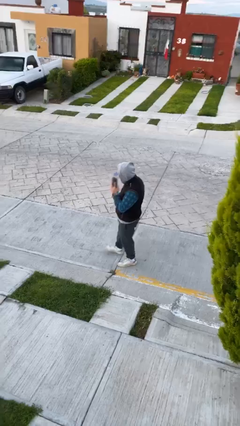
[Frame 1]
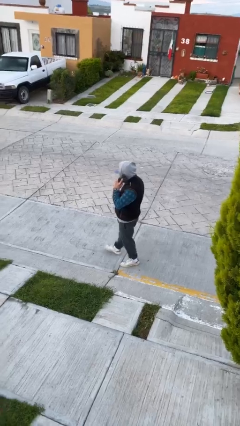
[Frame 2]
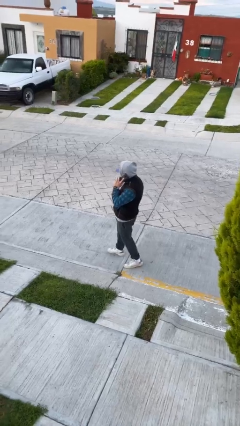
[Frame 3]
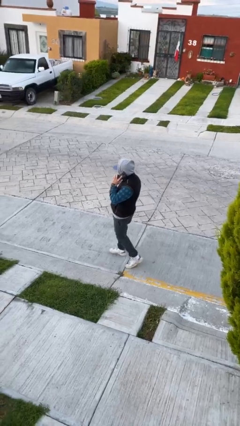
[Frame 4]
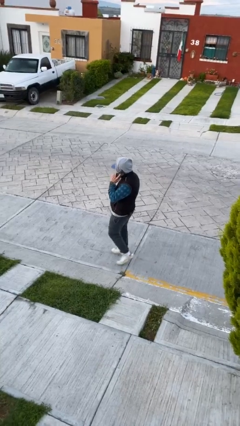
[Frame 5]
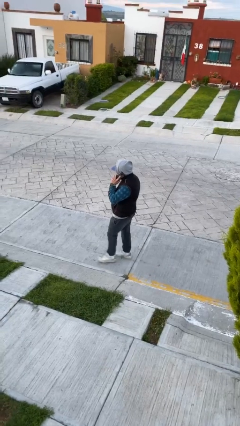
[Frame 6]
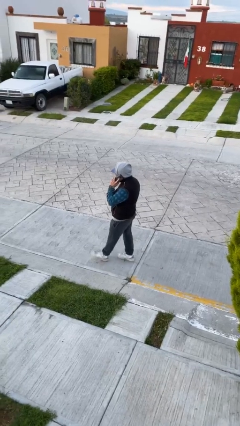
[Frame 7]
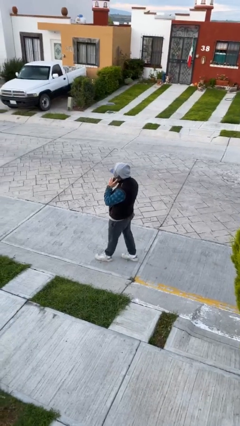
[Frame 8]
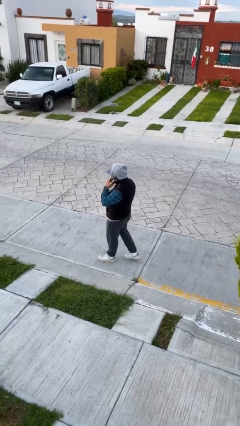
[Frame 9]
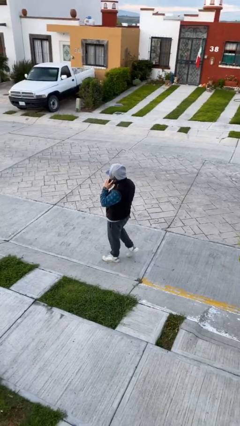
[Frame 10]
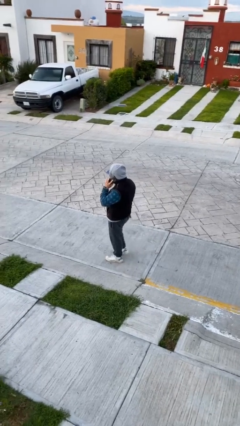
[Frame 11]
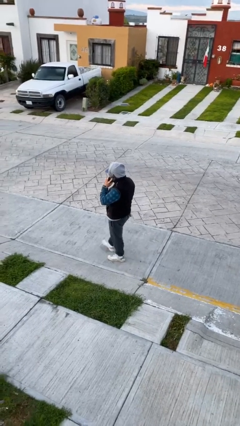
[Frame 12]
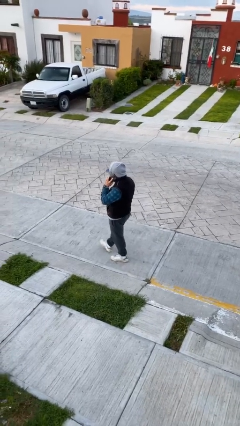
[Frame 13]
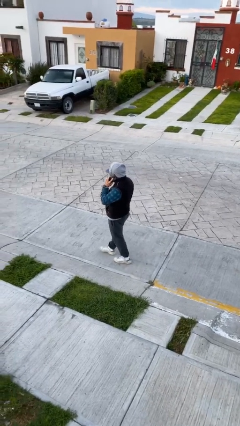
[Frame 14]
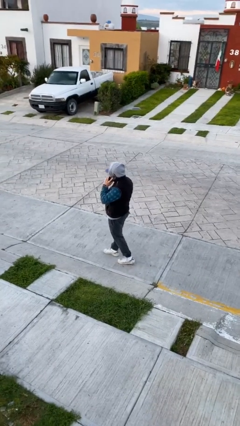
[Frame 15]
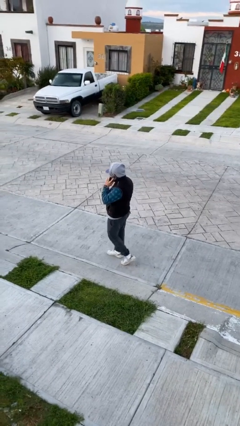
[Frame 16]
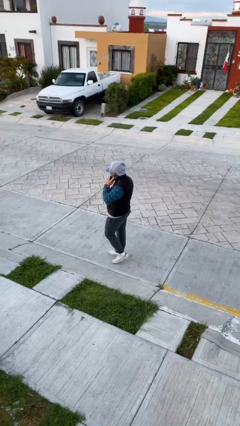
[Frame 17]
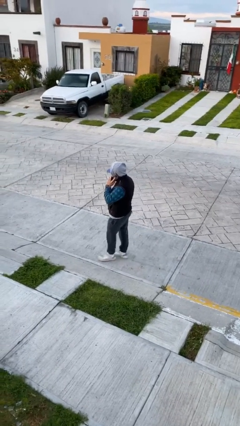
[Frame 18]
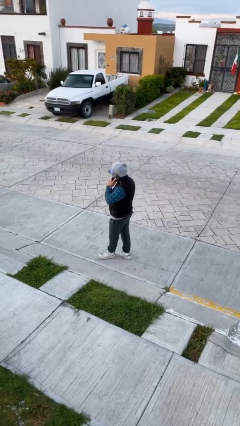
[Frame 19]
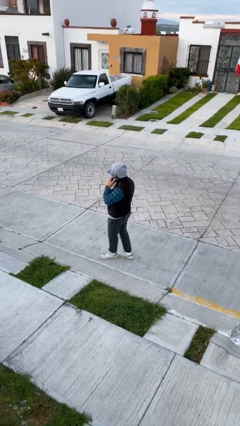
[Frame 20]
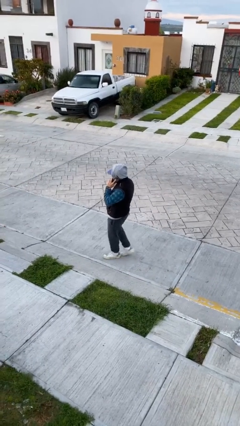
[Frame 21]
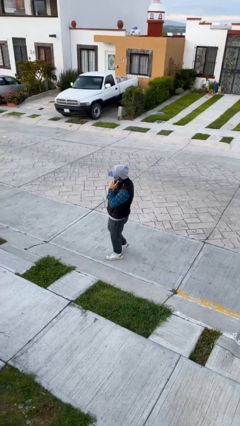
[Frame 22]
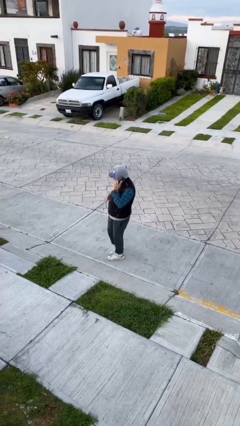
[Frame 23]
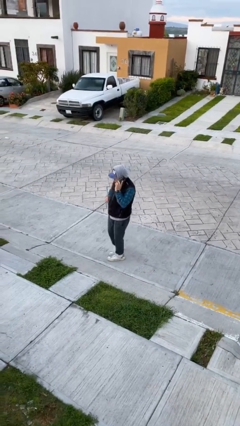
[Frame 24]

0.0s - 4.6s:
person talks on phone

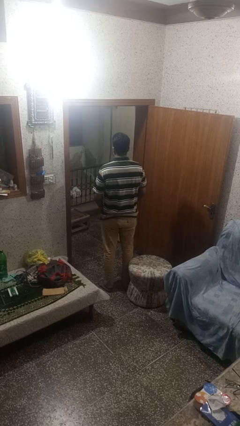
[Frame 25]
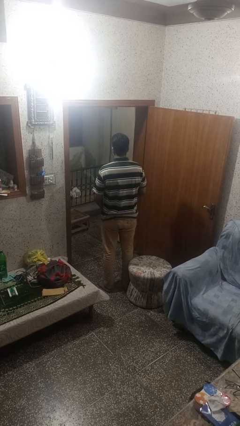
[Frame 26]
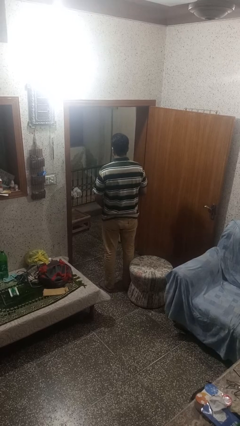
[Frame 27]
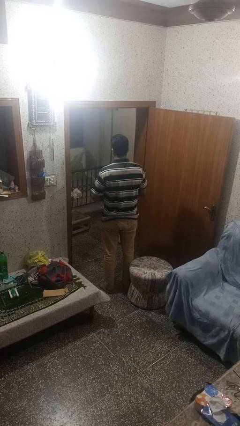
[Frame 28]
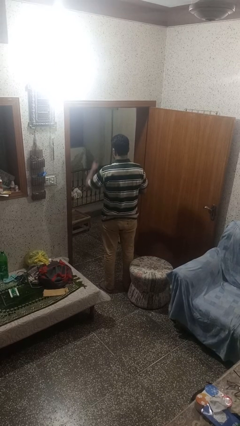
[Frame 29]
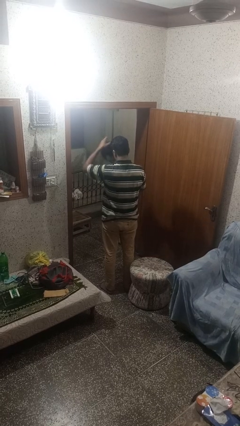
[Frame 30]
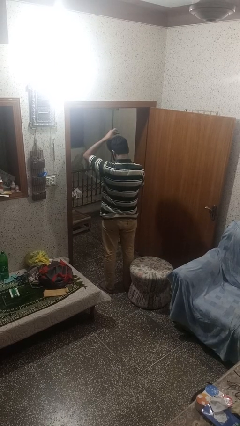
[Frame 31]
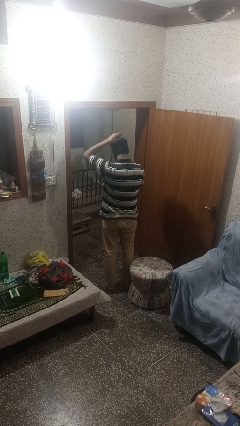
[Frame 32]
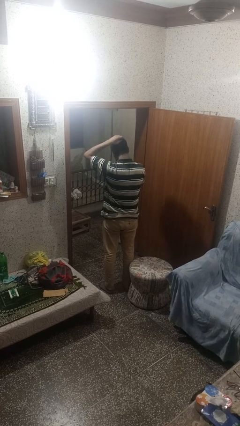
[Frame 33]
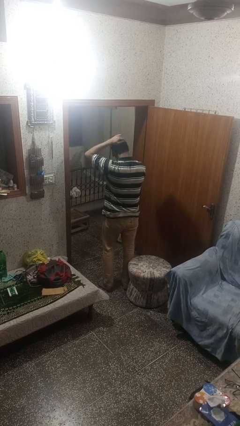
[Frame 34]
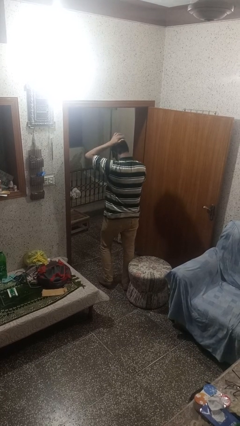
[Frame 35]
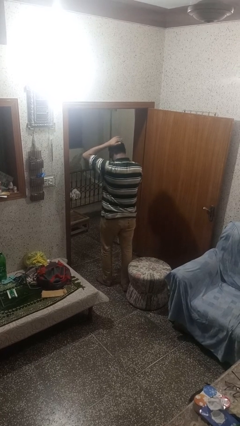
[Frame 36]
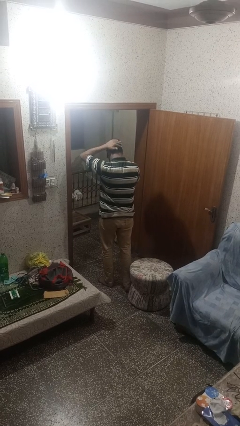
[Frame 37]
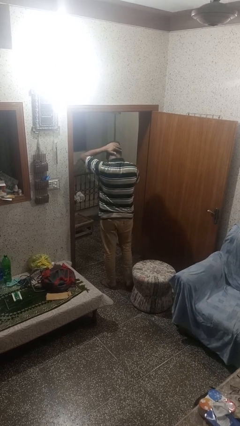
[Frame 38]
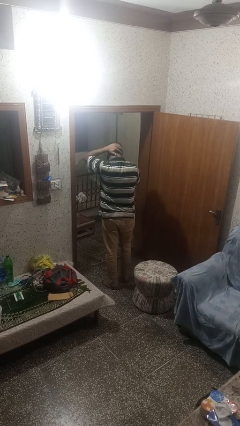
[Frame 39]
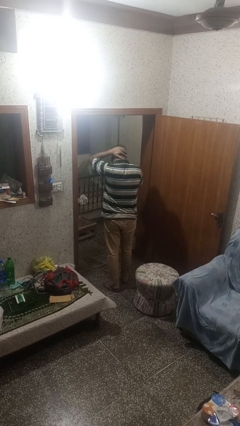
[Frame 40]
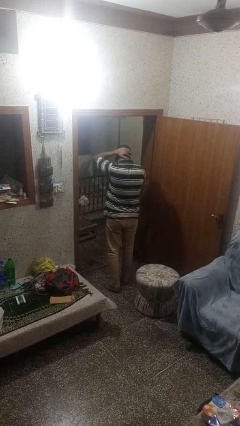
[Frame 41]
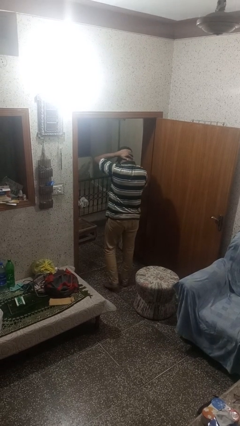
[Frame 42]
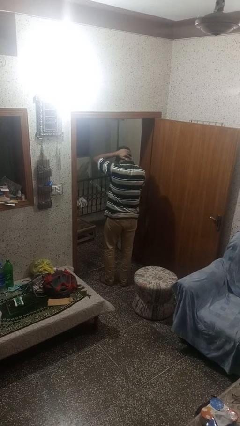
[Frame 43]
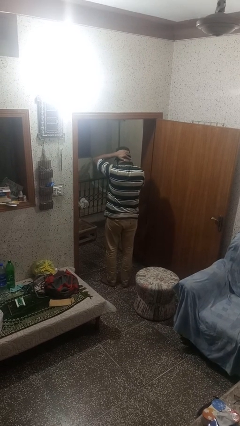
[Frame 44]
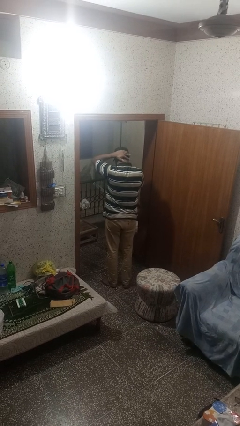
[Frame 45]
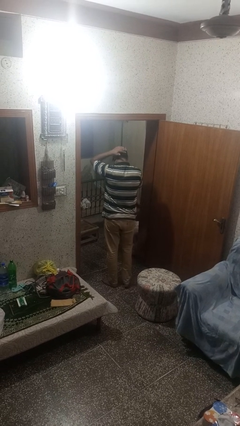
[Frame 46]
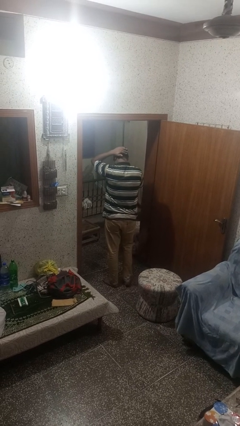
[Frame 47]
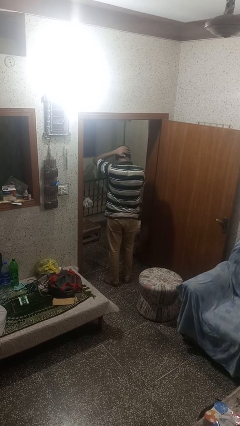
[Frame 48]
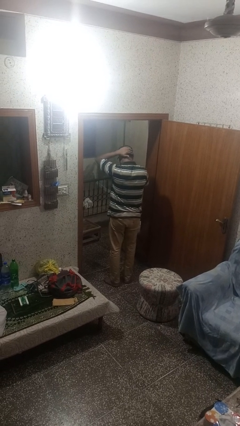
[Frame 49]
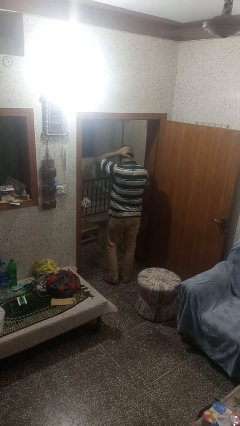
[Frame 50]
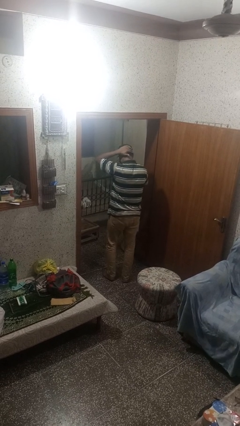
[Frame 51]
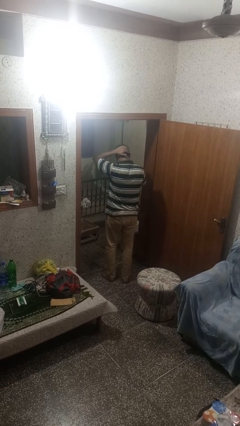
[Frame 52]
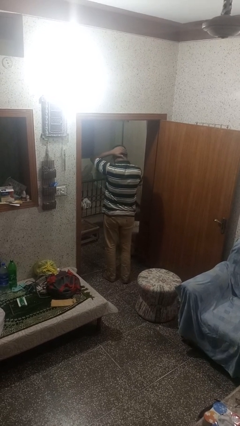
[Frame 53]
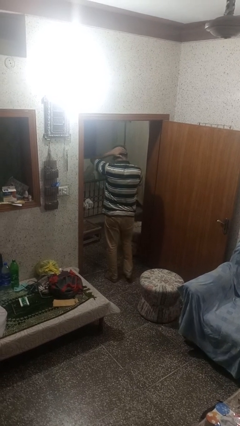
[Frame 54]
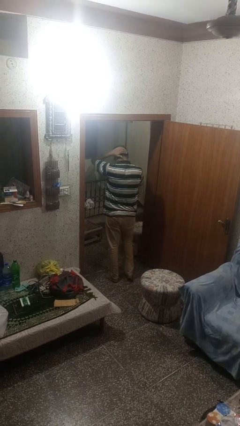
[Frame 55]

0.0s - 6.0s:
person puts on hat

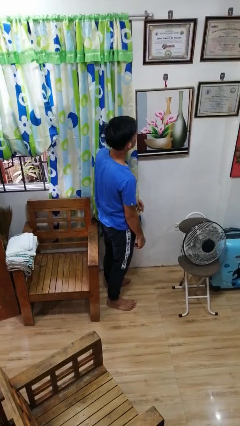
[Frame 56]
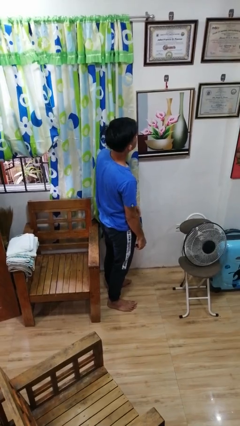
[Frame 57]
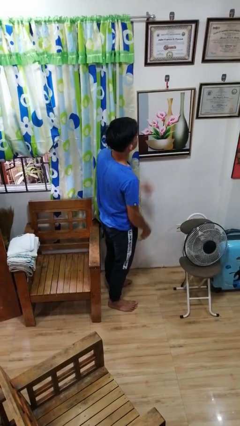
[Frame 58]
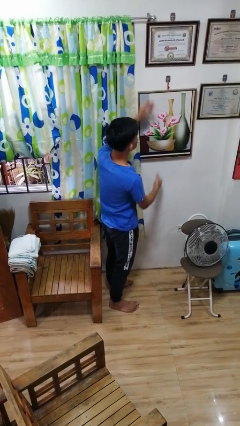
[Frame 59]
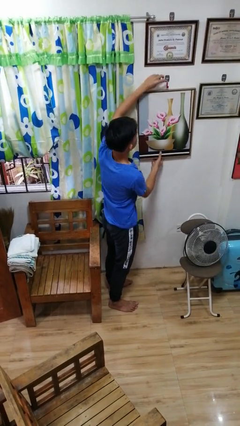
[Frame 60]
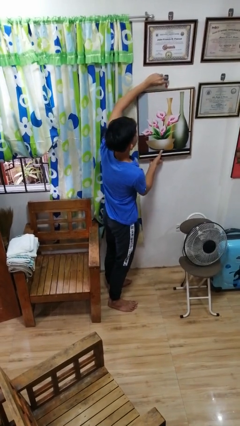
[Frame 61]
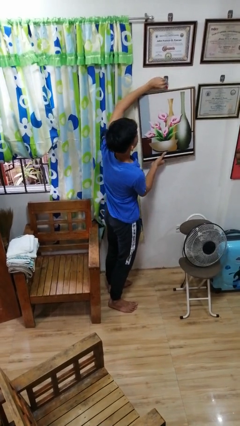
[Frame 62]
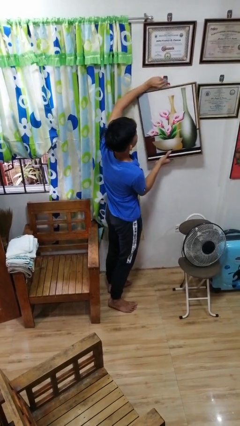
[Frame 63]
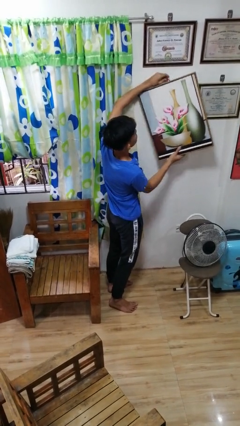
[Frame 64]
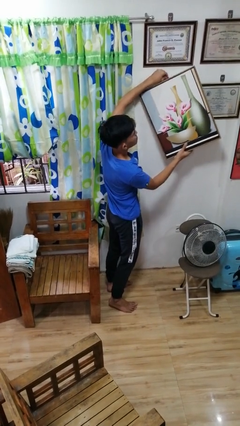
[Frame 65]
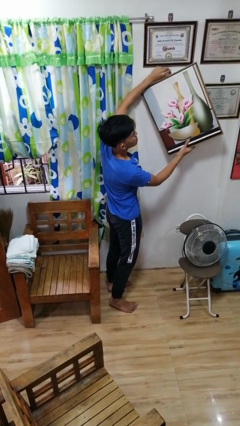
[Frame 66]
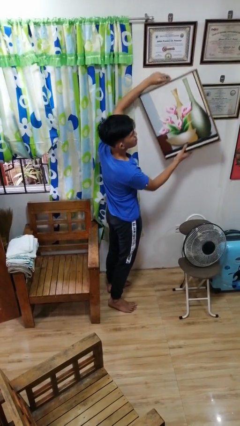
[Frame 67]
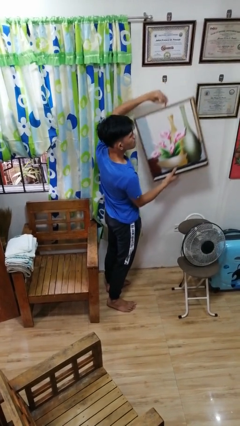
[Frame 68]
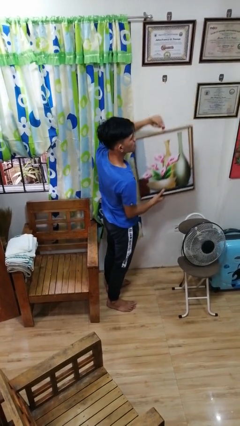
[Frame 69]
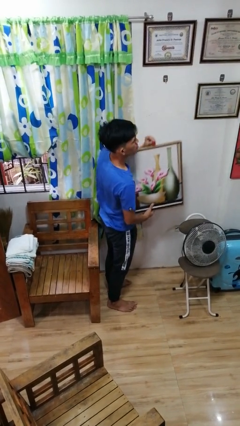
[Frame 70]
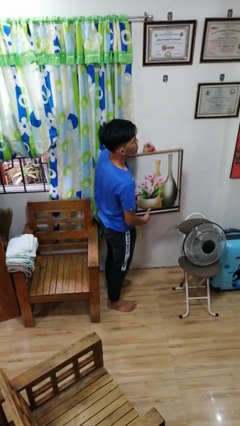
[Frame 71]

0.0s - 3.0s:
person takes down picture frame

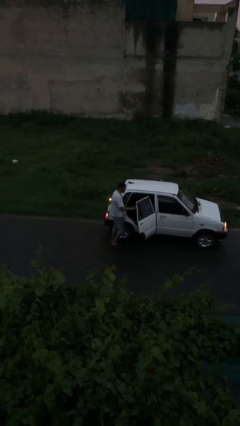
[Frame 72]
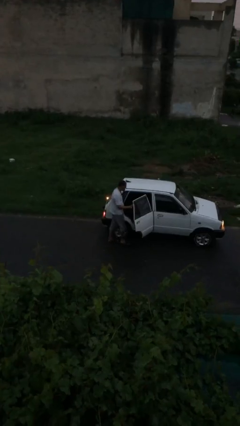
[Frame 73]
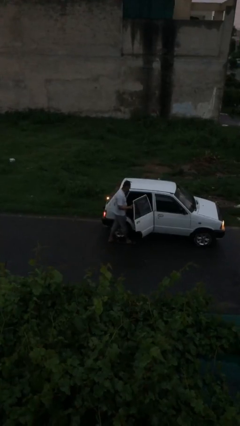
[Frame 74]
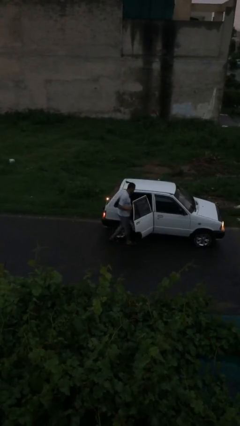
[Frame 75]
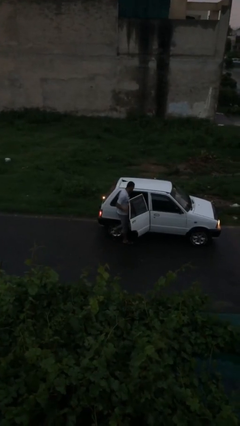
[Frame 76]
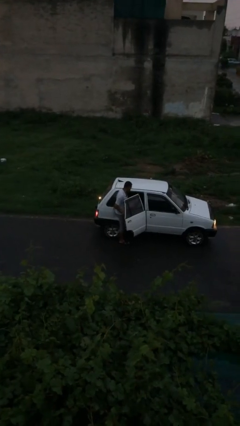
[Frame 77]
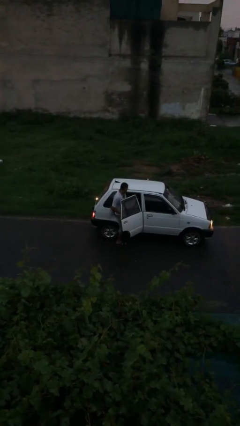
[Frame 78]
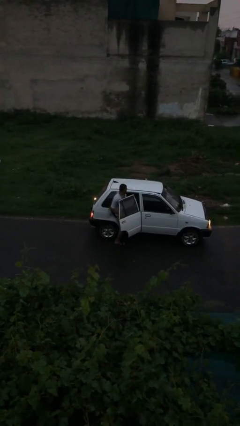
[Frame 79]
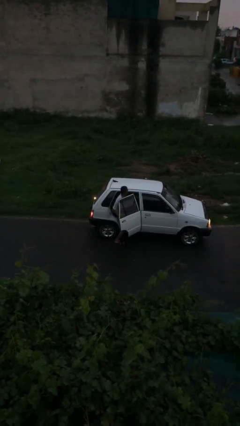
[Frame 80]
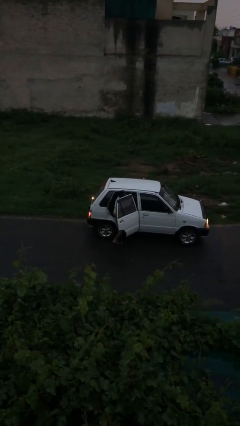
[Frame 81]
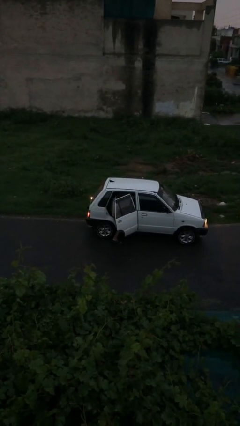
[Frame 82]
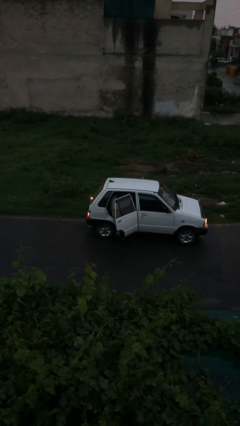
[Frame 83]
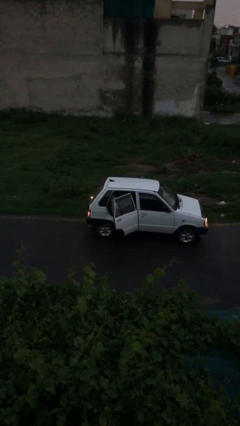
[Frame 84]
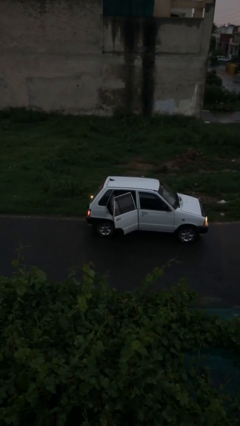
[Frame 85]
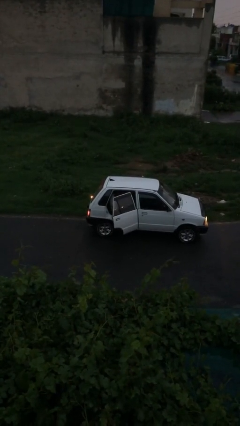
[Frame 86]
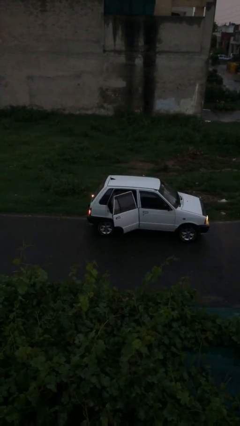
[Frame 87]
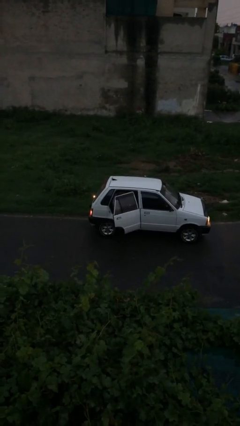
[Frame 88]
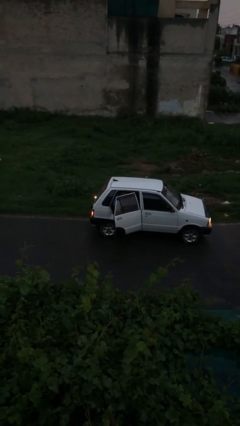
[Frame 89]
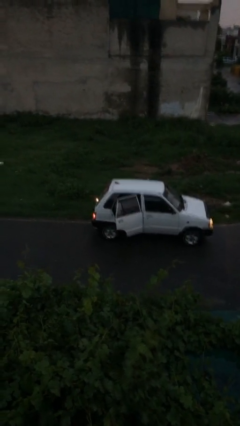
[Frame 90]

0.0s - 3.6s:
person enters car

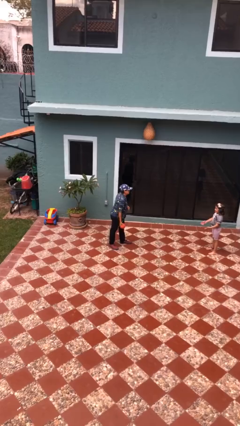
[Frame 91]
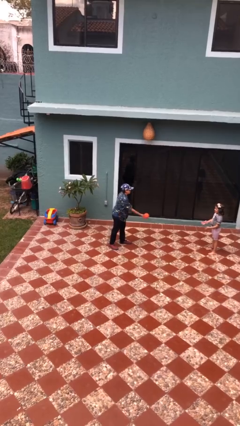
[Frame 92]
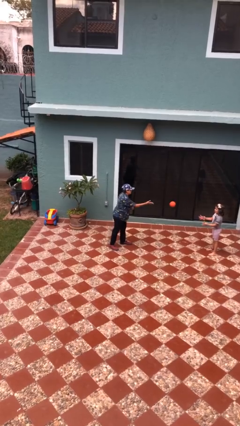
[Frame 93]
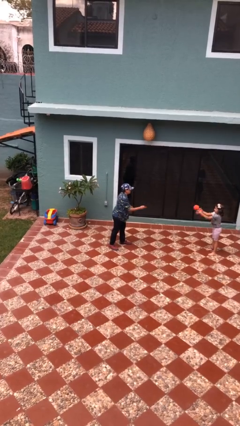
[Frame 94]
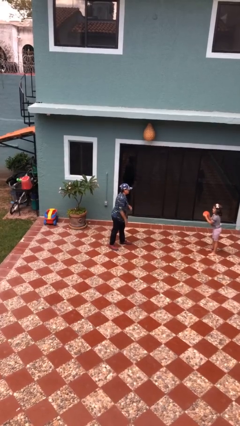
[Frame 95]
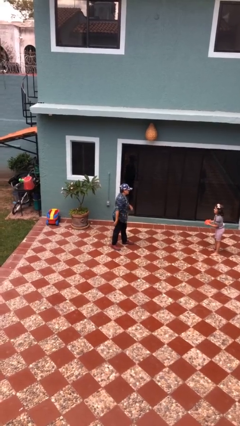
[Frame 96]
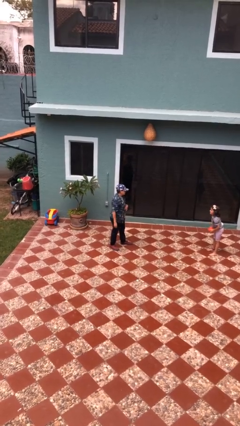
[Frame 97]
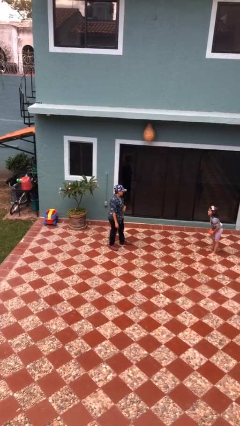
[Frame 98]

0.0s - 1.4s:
person throws object to person
